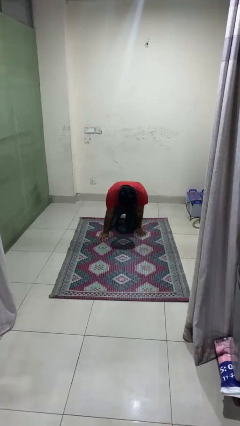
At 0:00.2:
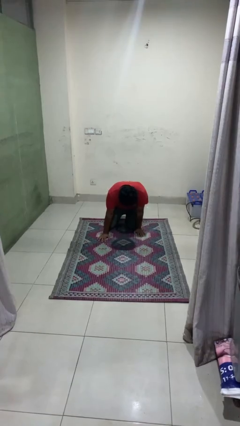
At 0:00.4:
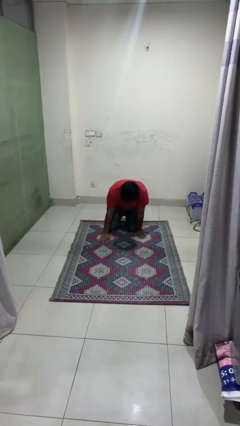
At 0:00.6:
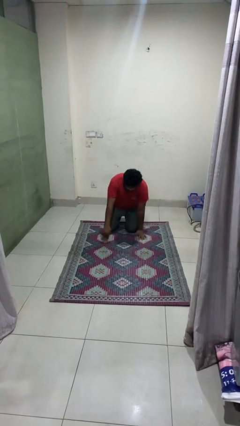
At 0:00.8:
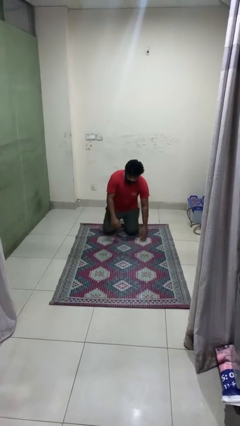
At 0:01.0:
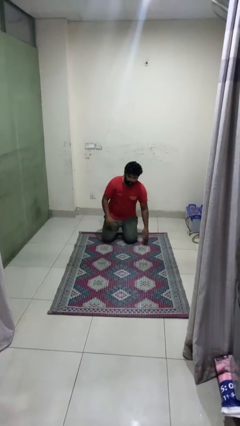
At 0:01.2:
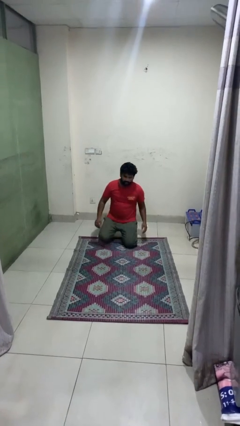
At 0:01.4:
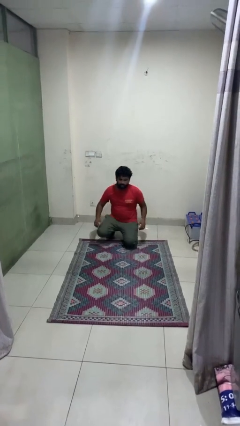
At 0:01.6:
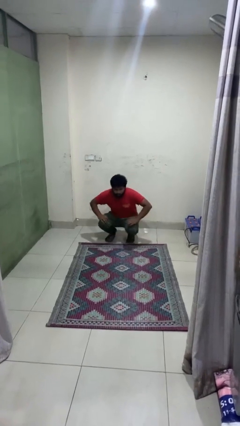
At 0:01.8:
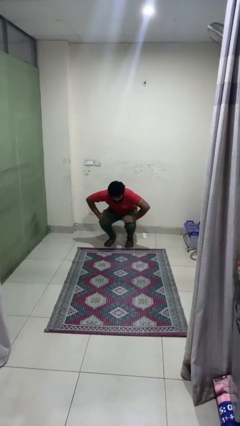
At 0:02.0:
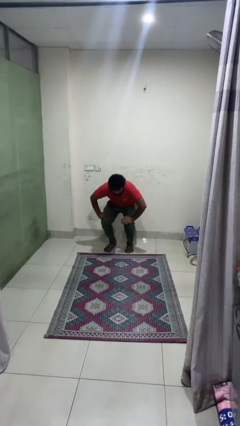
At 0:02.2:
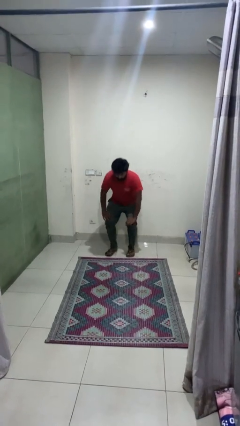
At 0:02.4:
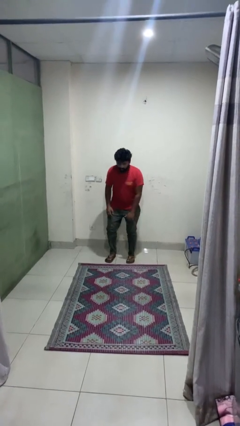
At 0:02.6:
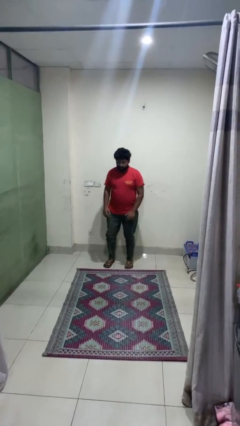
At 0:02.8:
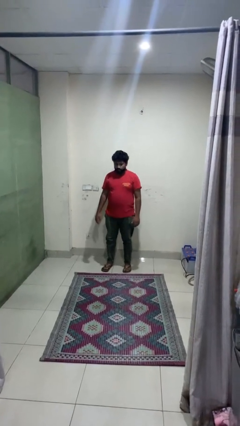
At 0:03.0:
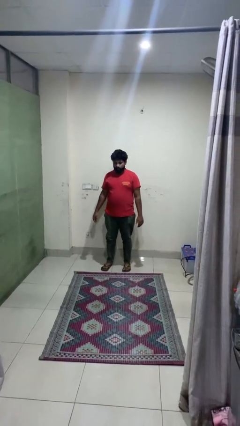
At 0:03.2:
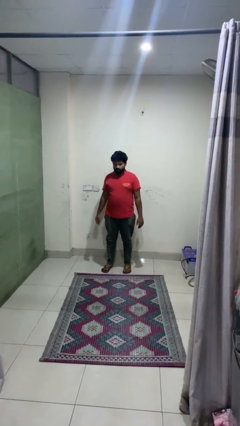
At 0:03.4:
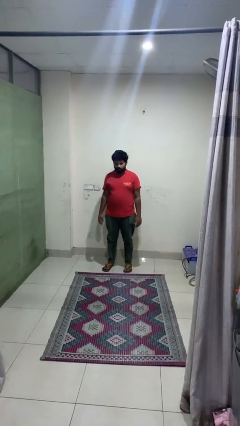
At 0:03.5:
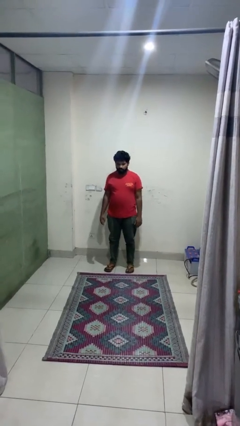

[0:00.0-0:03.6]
person stands up from floor

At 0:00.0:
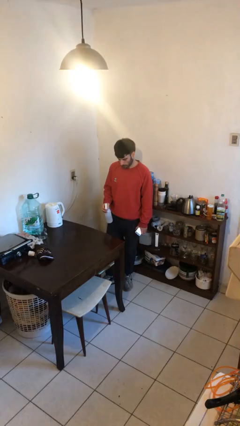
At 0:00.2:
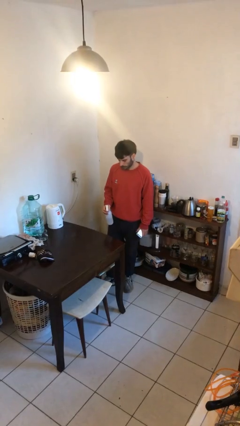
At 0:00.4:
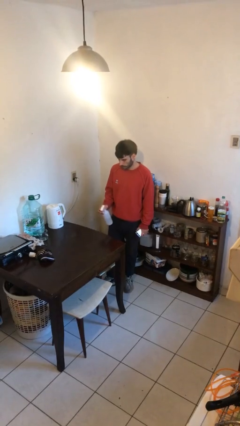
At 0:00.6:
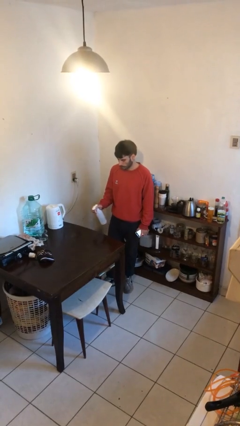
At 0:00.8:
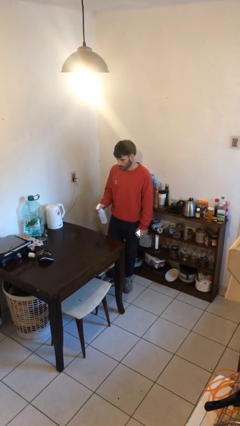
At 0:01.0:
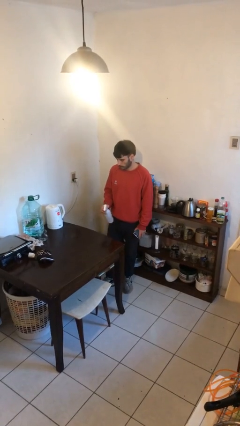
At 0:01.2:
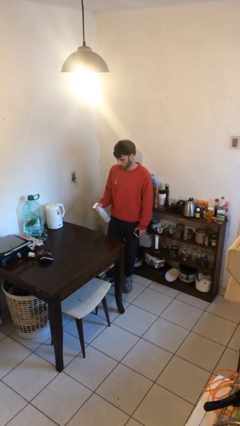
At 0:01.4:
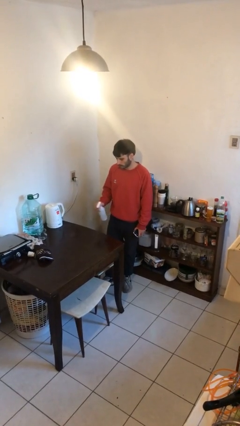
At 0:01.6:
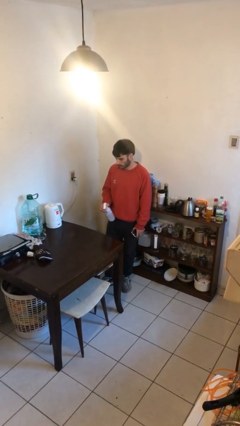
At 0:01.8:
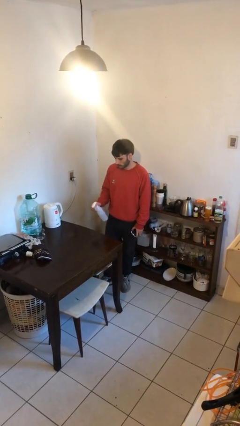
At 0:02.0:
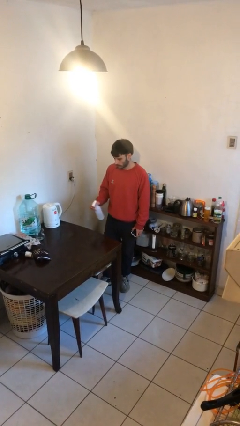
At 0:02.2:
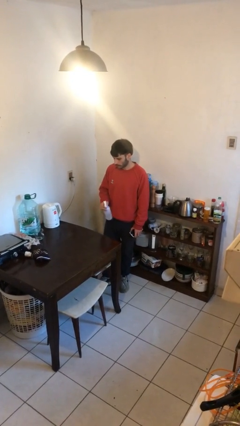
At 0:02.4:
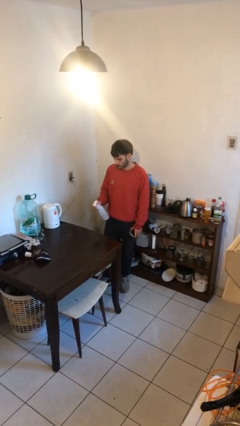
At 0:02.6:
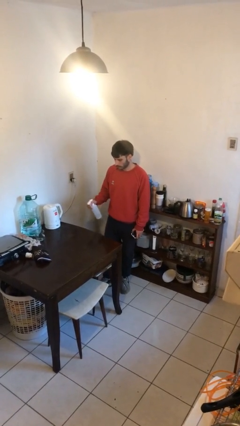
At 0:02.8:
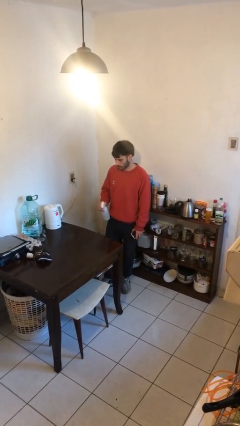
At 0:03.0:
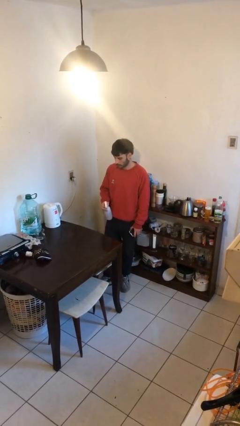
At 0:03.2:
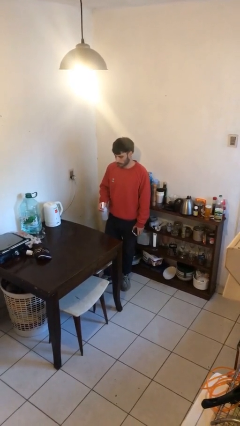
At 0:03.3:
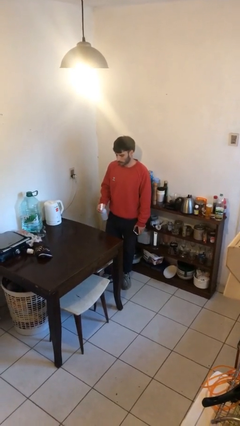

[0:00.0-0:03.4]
person sprays from bottle

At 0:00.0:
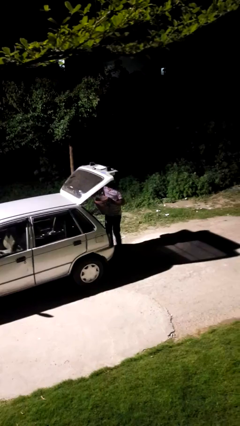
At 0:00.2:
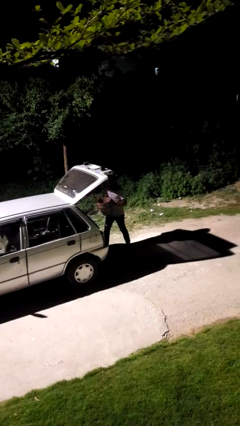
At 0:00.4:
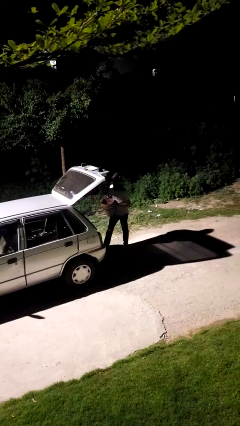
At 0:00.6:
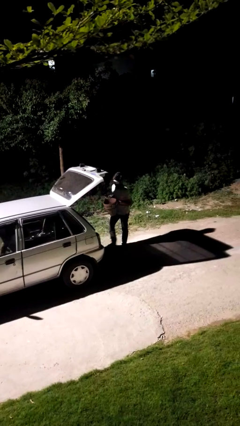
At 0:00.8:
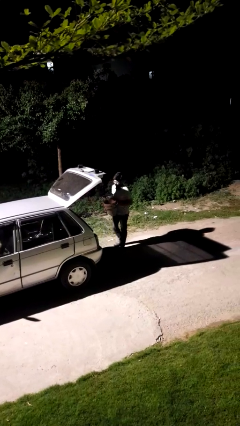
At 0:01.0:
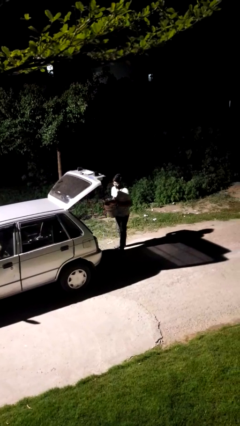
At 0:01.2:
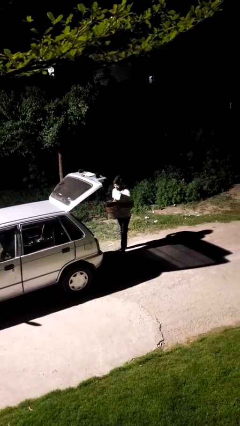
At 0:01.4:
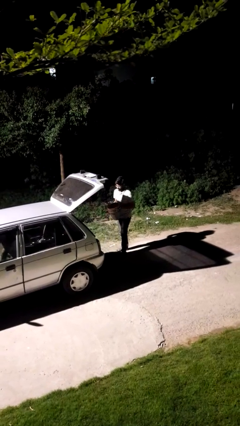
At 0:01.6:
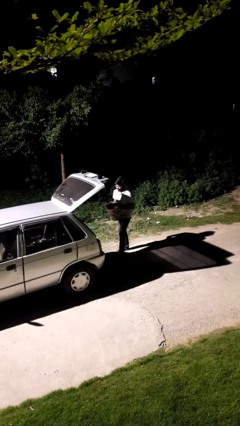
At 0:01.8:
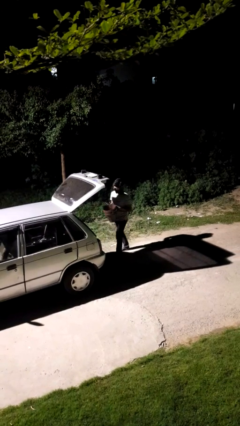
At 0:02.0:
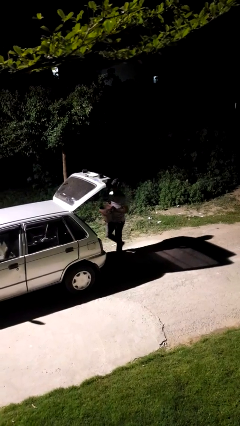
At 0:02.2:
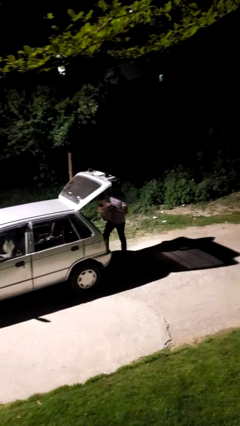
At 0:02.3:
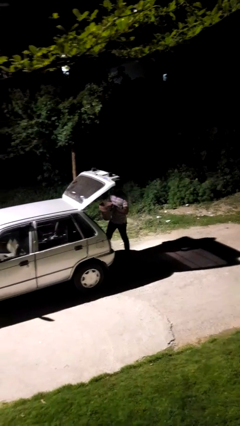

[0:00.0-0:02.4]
person unloads car

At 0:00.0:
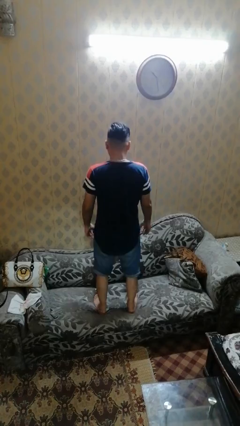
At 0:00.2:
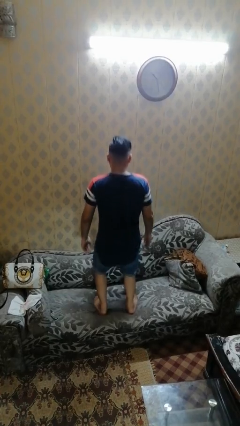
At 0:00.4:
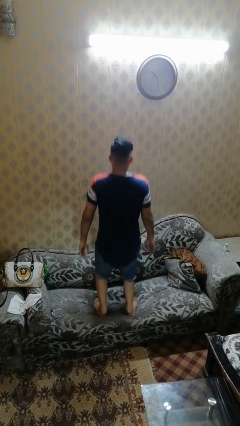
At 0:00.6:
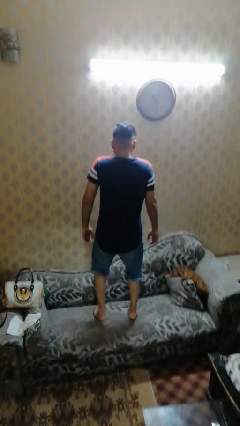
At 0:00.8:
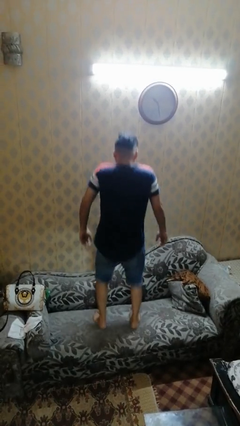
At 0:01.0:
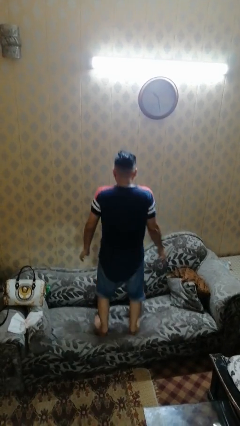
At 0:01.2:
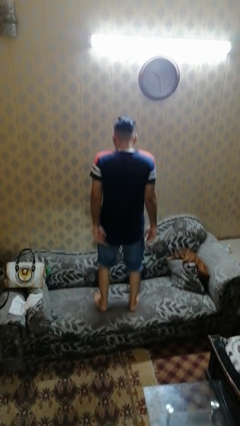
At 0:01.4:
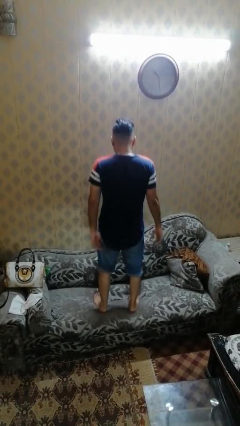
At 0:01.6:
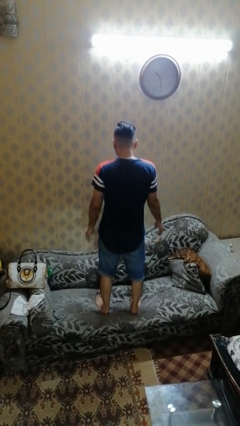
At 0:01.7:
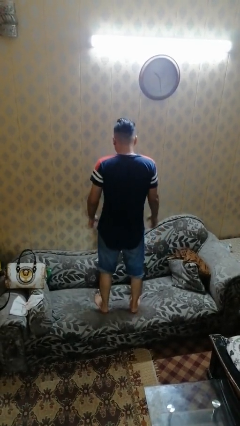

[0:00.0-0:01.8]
person jumps on couch

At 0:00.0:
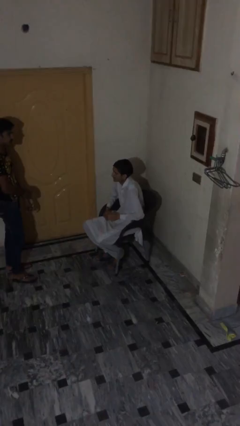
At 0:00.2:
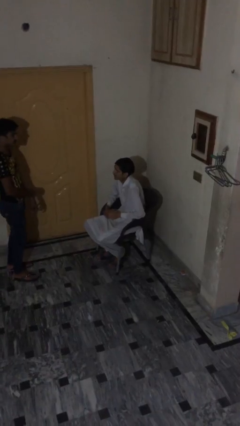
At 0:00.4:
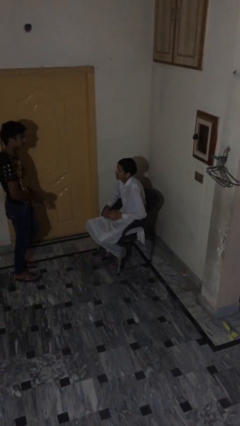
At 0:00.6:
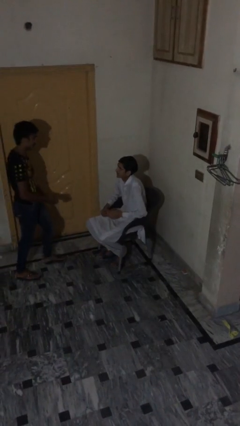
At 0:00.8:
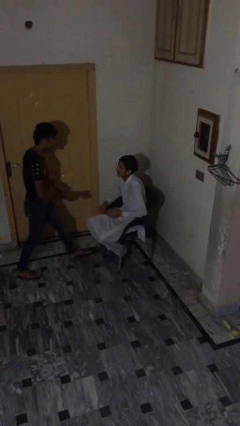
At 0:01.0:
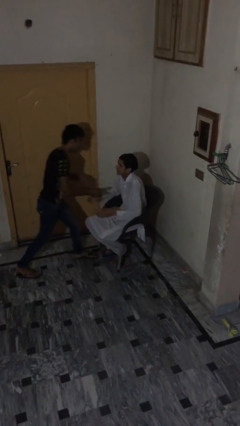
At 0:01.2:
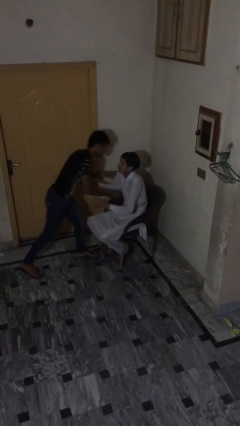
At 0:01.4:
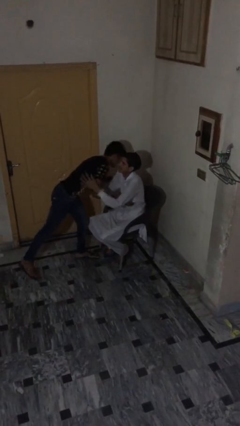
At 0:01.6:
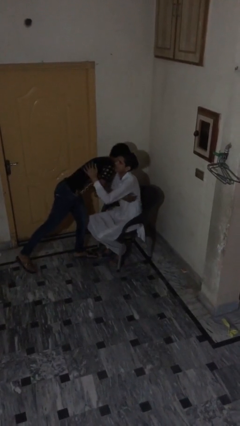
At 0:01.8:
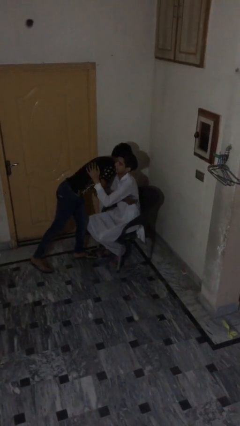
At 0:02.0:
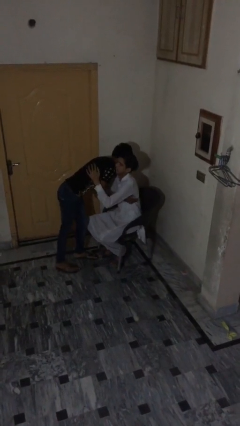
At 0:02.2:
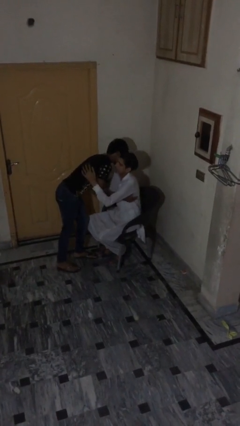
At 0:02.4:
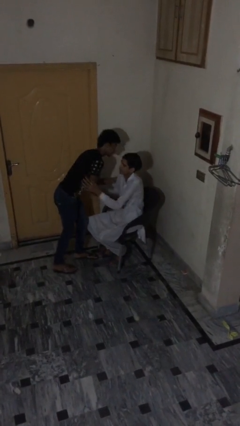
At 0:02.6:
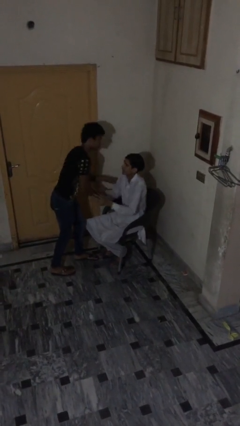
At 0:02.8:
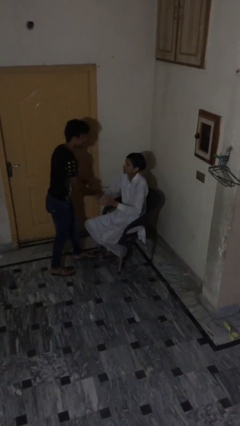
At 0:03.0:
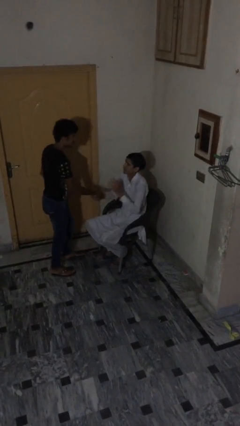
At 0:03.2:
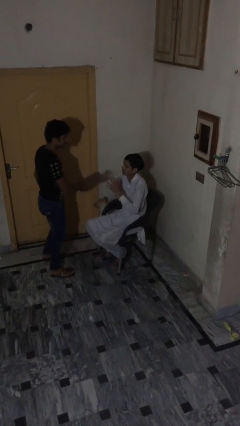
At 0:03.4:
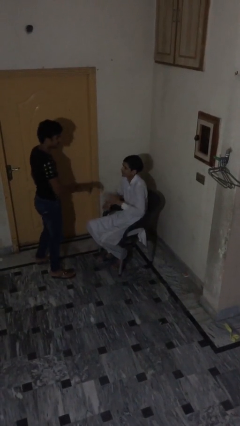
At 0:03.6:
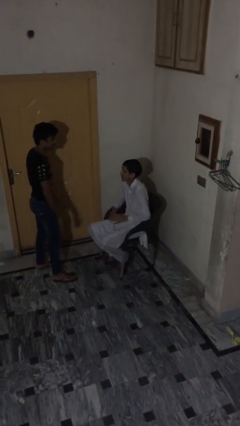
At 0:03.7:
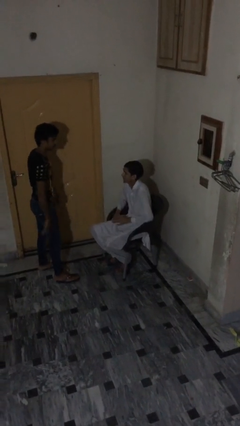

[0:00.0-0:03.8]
person embraces person

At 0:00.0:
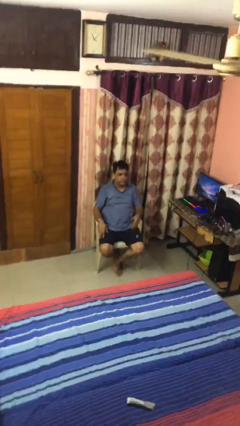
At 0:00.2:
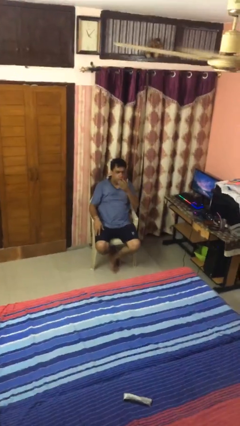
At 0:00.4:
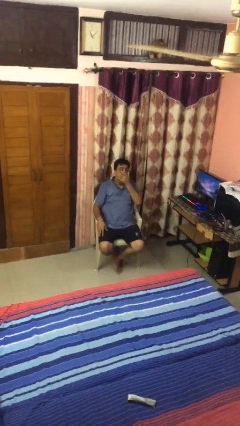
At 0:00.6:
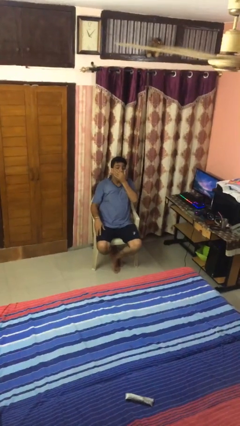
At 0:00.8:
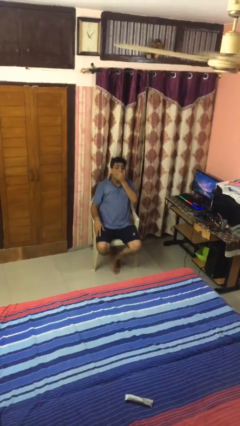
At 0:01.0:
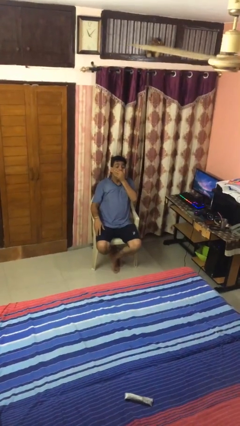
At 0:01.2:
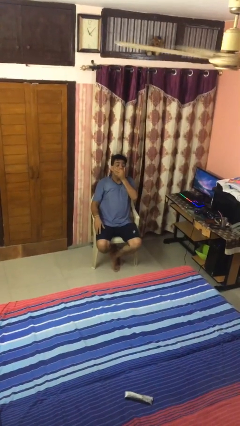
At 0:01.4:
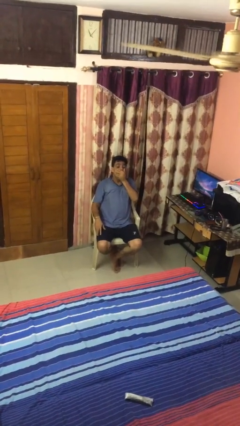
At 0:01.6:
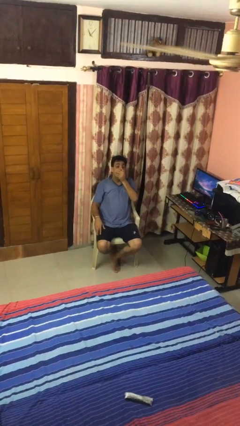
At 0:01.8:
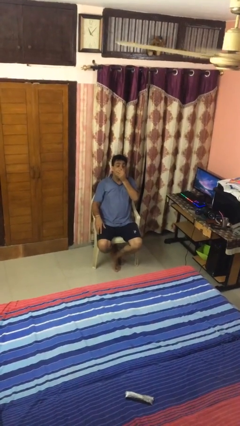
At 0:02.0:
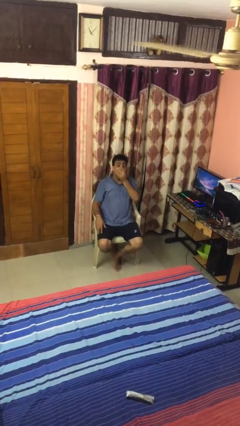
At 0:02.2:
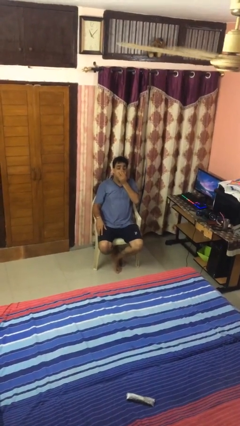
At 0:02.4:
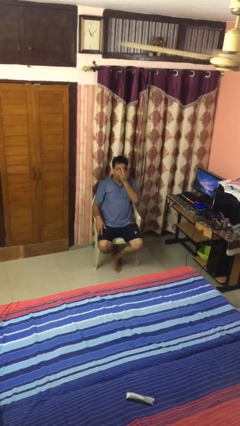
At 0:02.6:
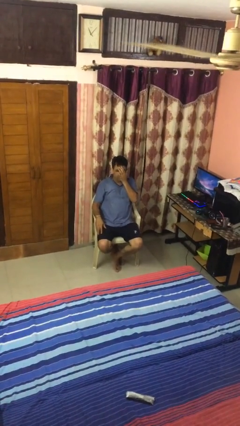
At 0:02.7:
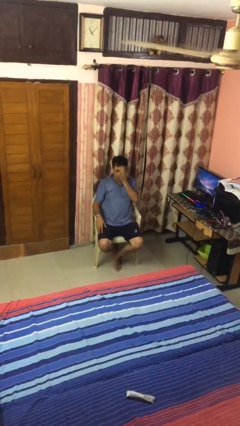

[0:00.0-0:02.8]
person covers face with hands
